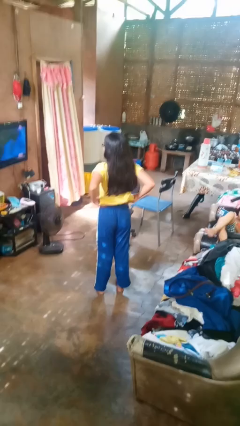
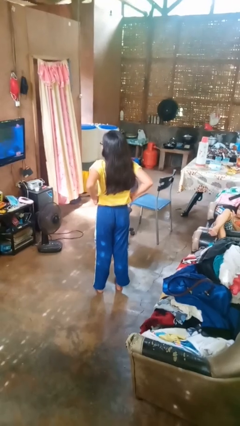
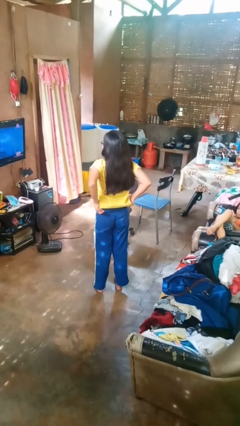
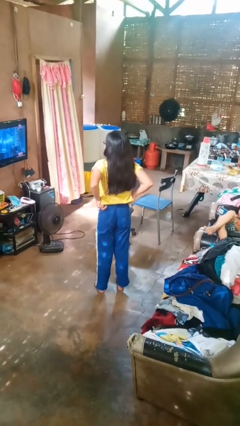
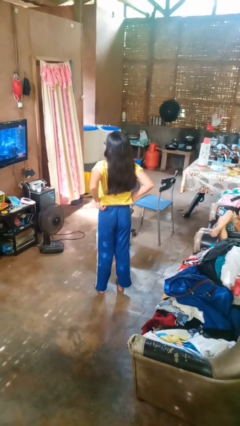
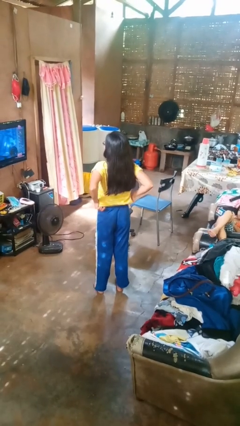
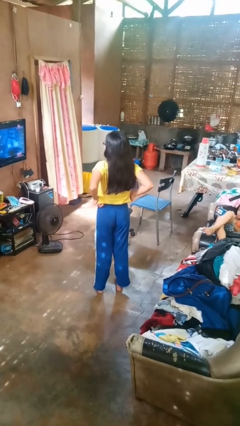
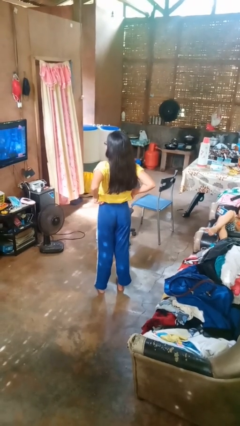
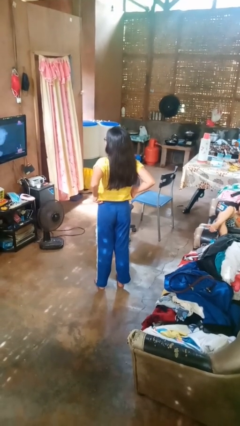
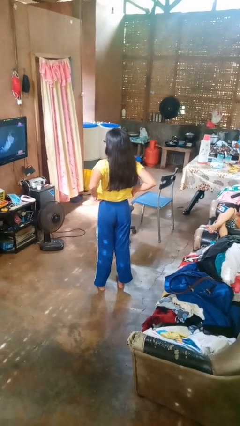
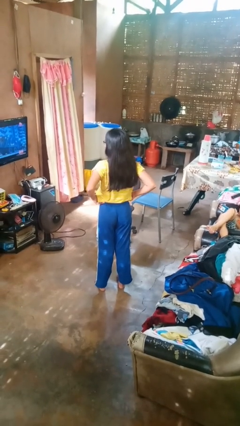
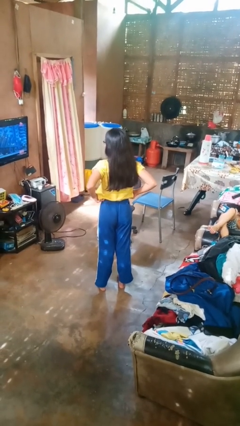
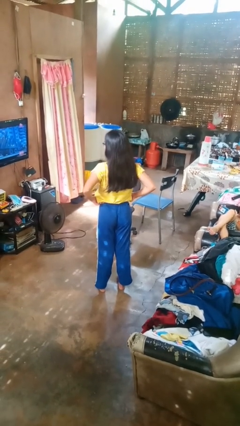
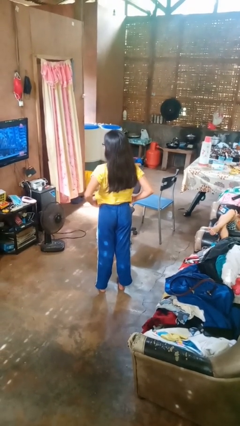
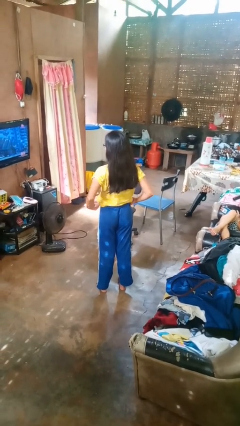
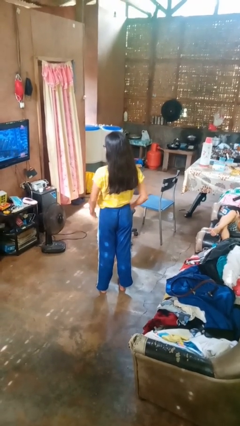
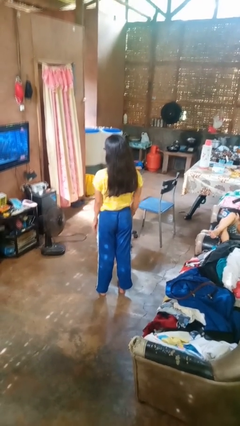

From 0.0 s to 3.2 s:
person hikes up pants

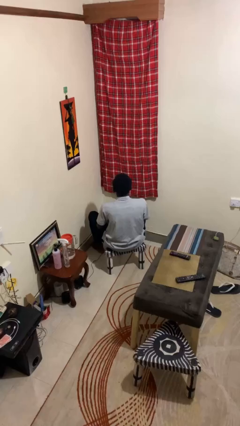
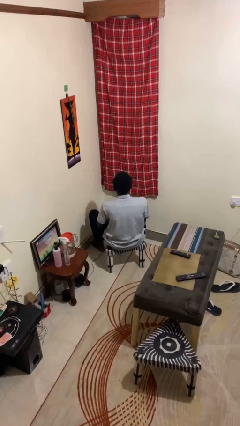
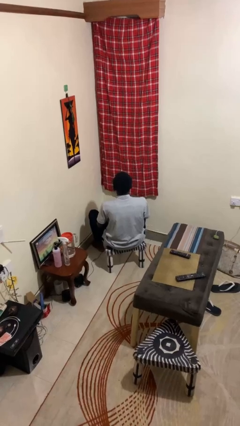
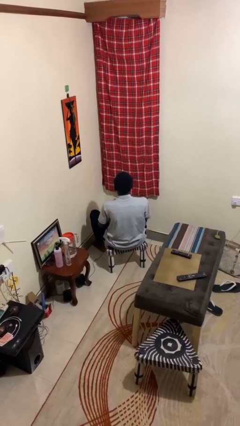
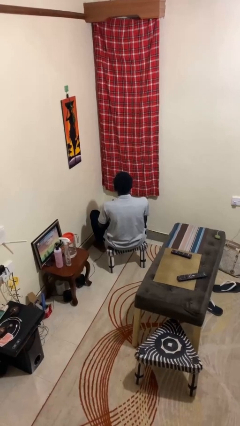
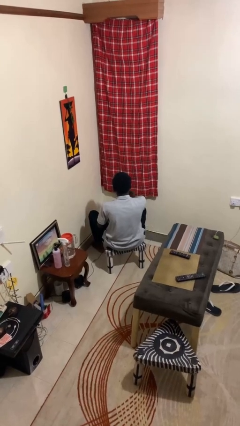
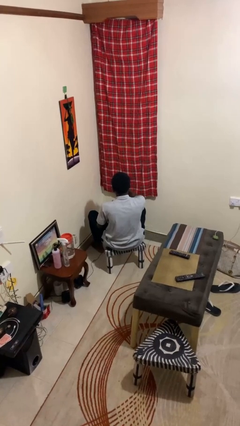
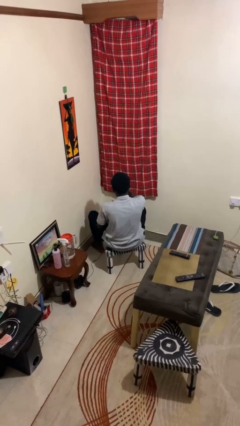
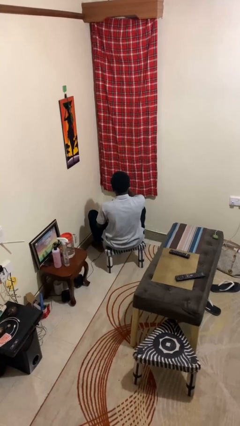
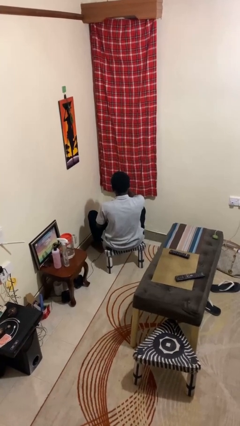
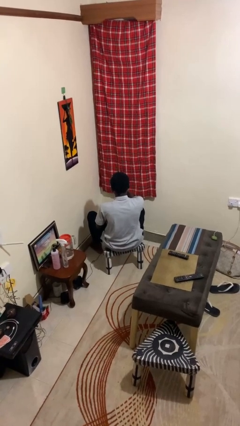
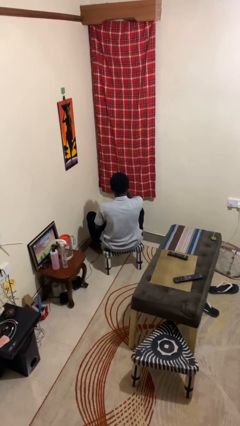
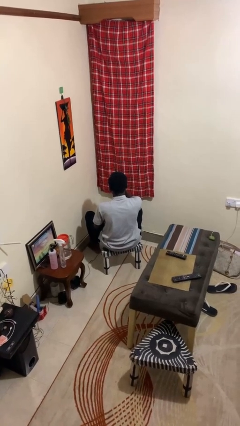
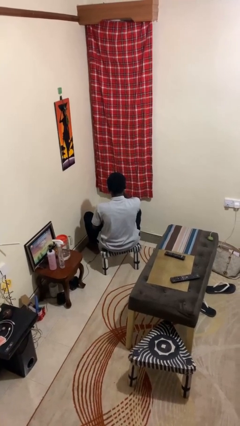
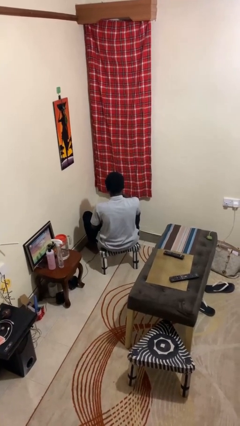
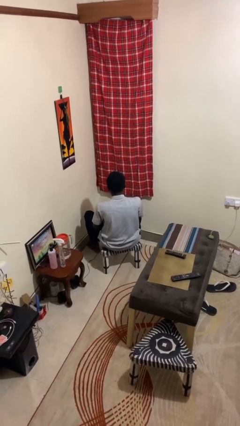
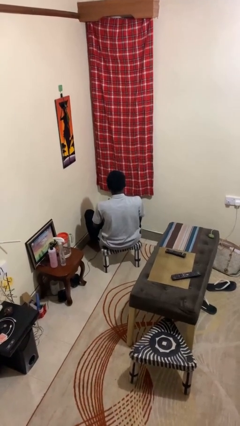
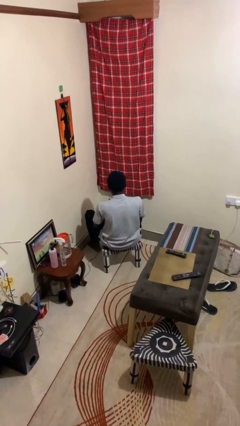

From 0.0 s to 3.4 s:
person scratches face

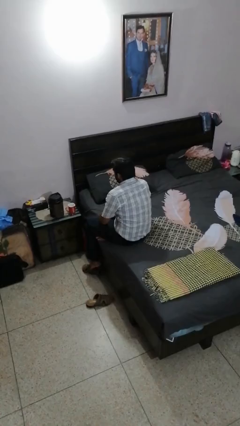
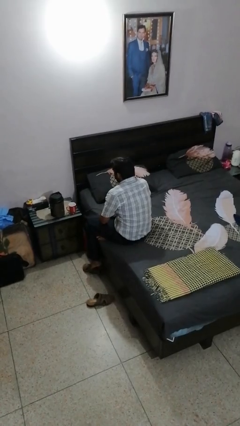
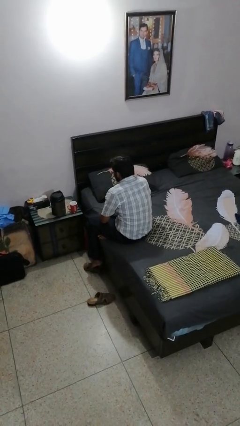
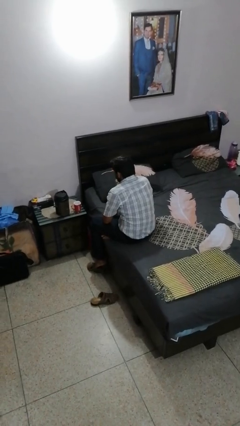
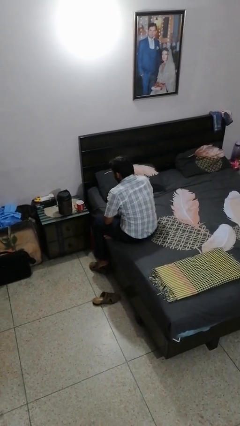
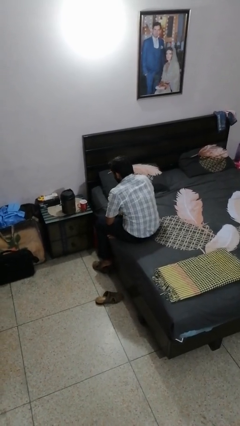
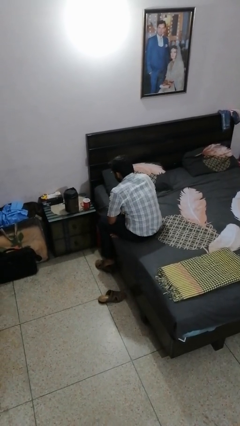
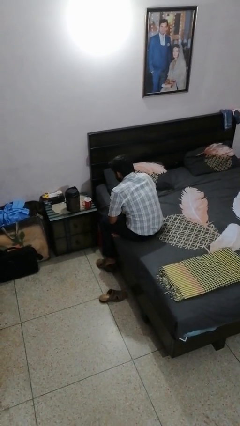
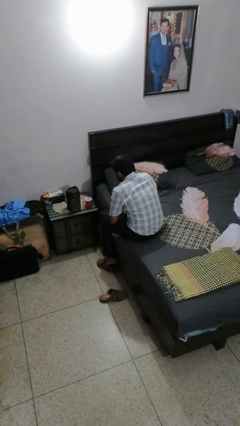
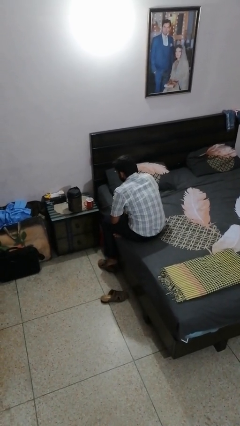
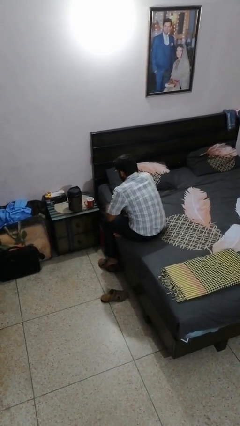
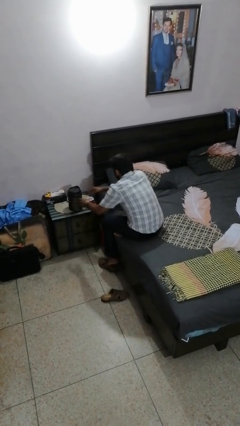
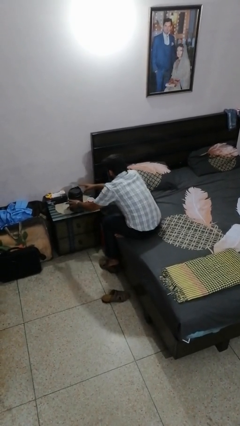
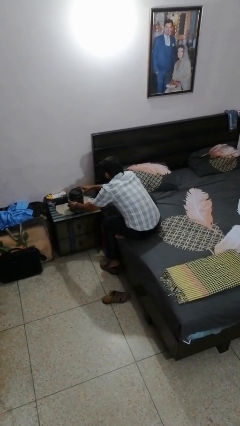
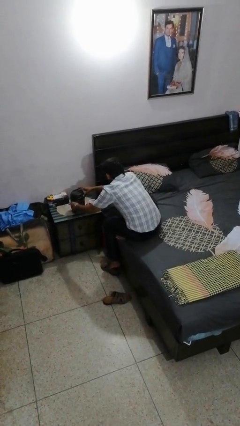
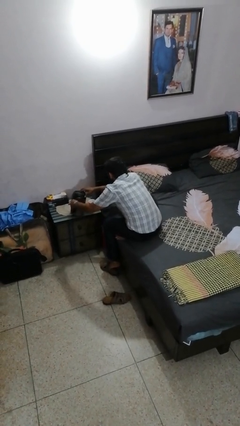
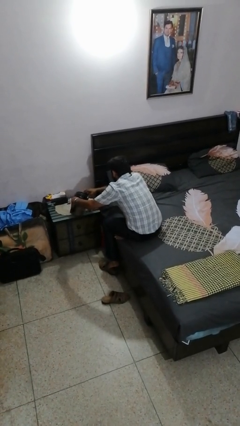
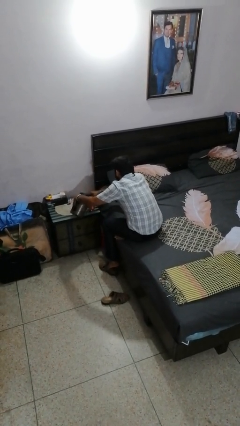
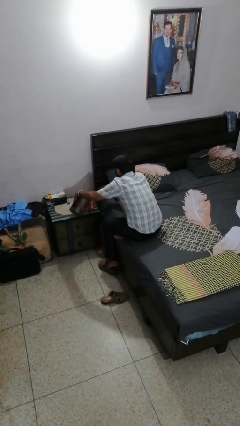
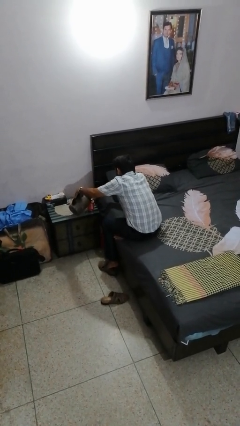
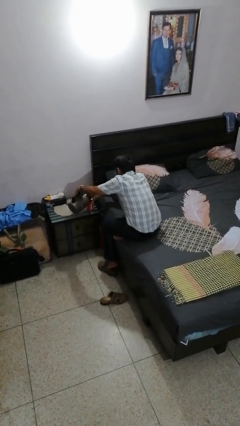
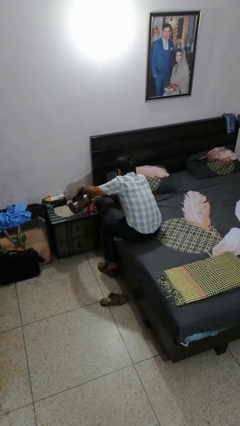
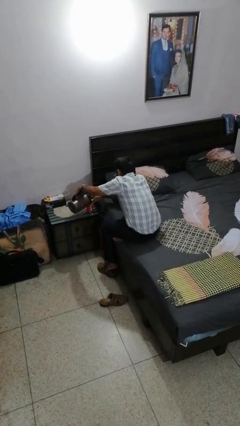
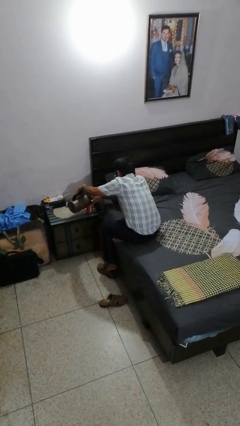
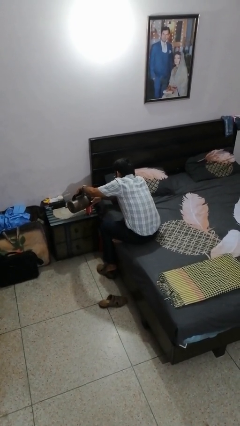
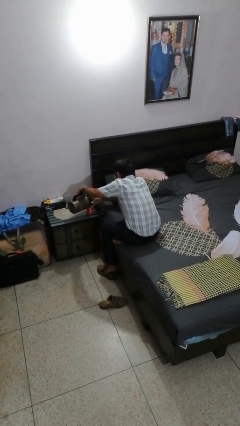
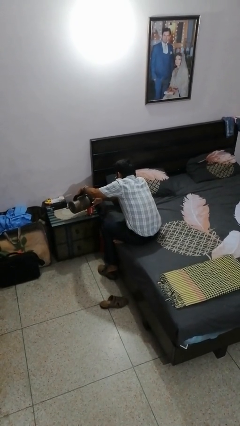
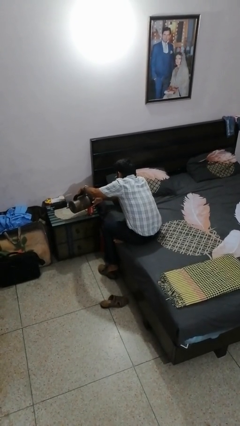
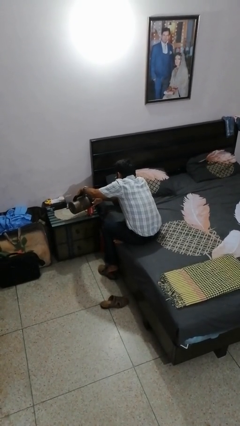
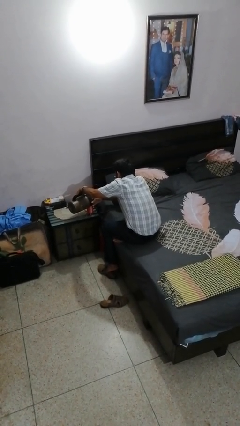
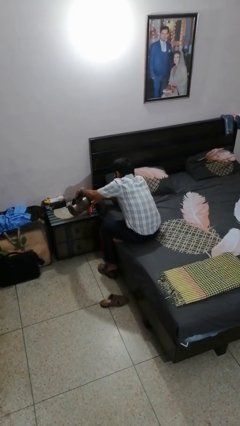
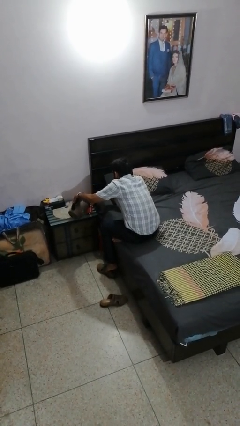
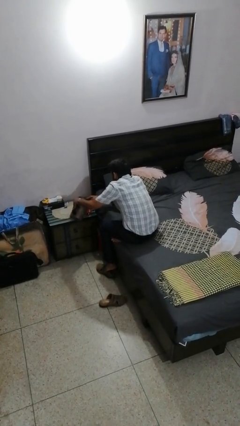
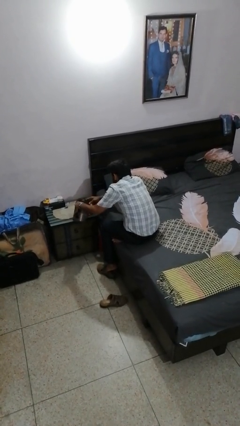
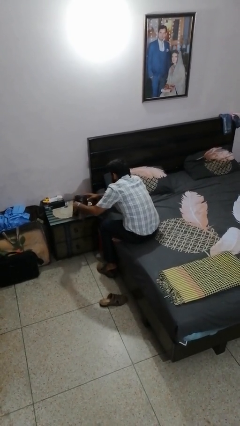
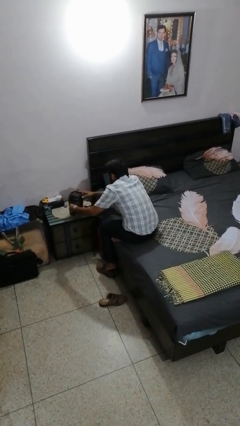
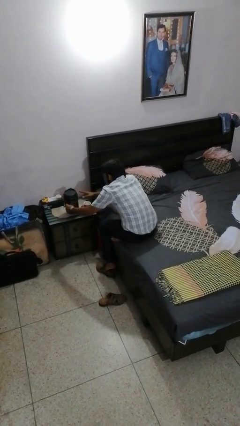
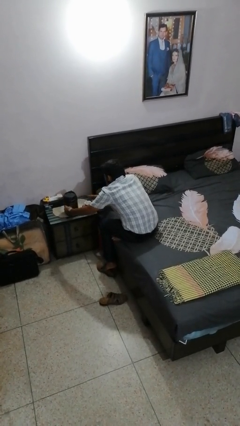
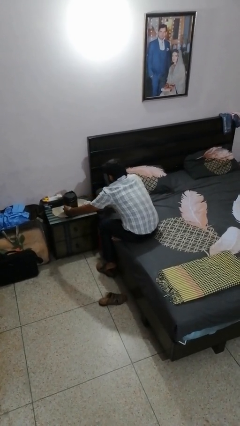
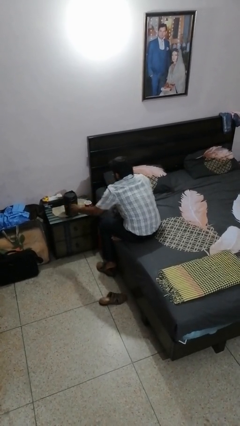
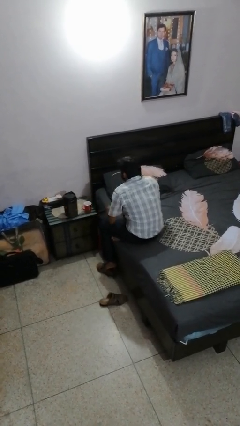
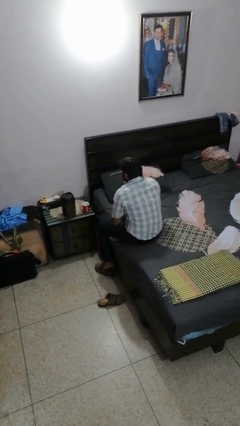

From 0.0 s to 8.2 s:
person pours coffee into mug

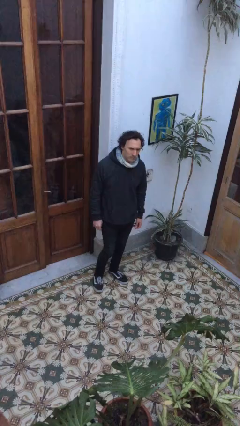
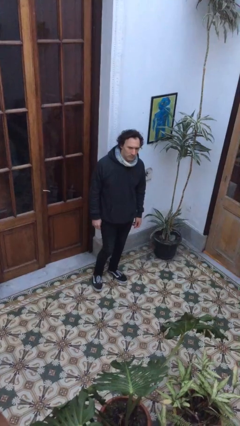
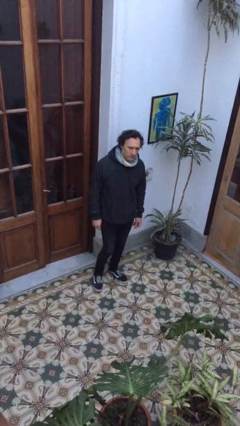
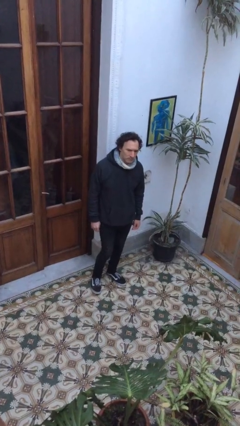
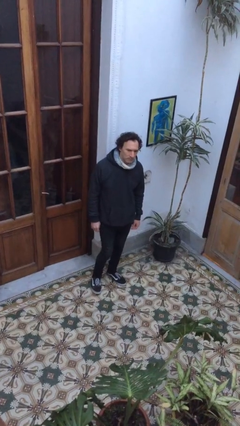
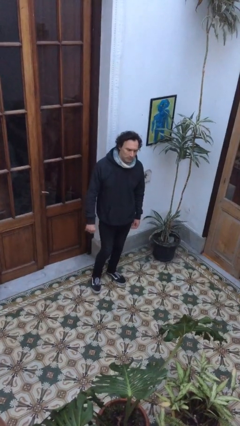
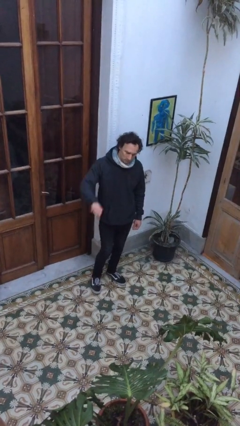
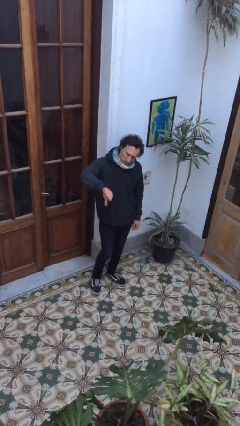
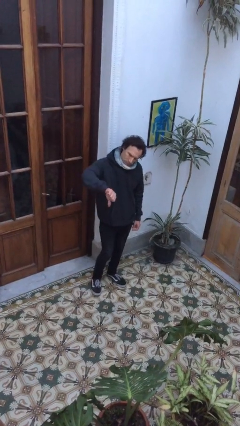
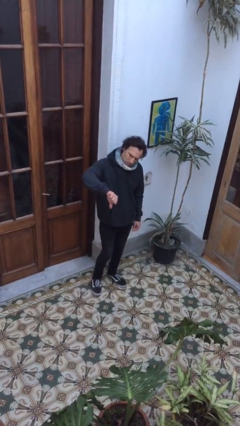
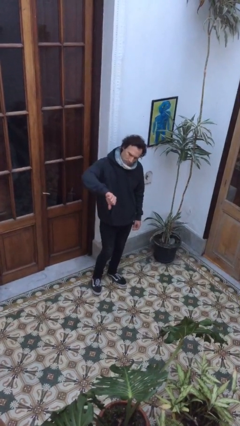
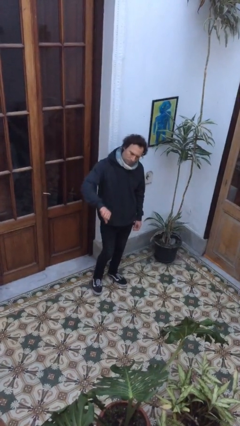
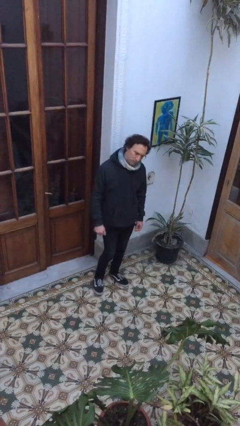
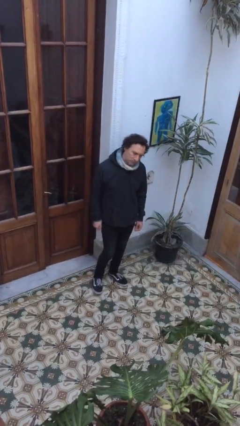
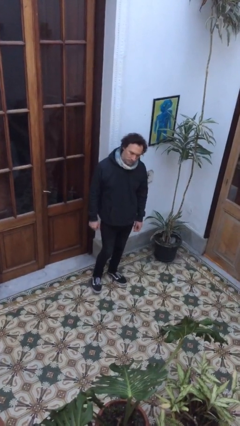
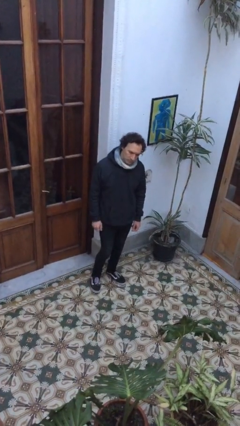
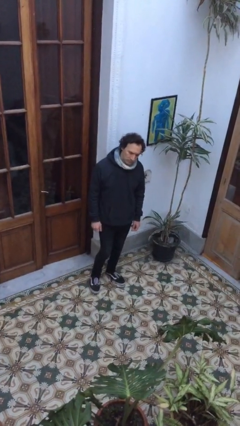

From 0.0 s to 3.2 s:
person gestures thumbs down
